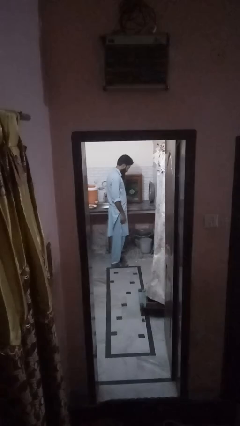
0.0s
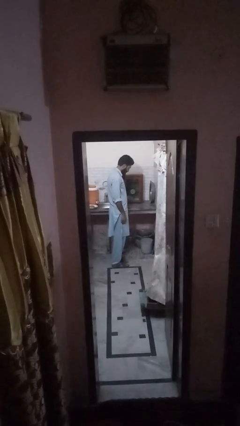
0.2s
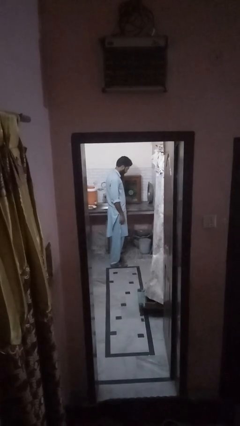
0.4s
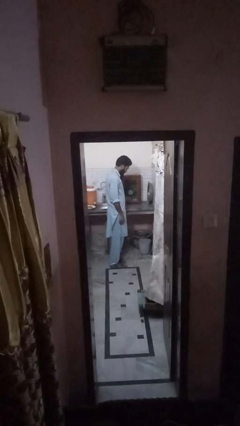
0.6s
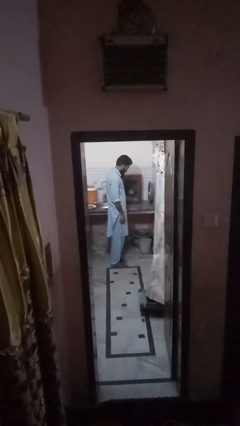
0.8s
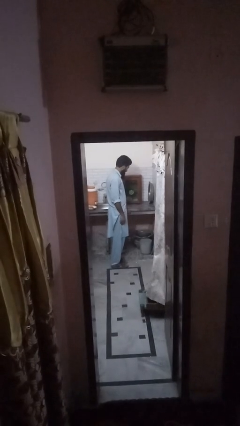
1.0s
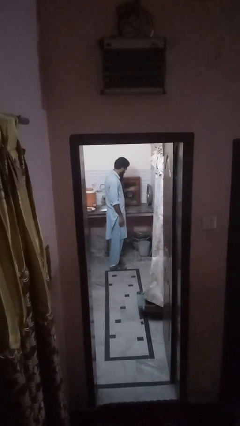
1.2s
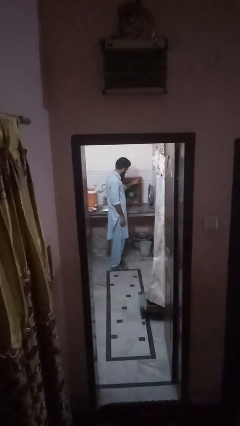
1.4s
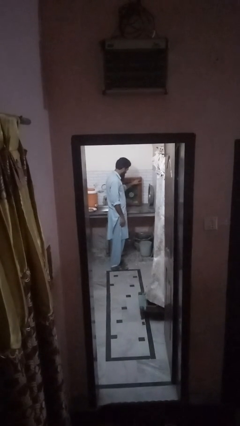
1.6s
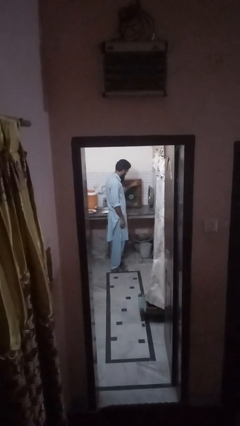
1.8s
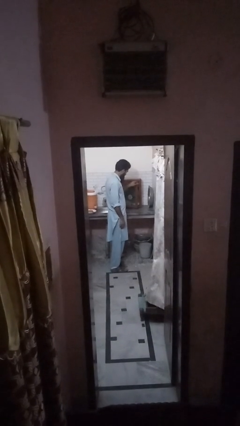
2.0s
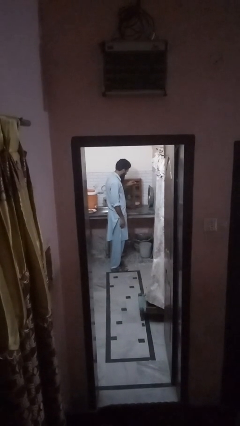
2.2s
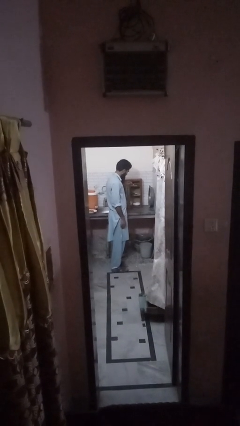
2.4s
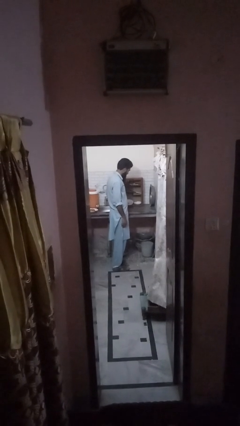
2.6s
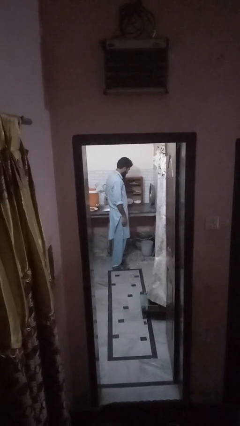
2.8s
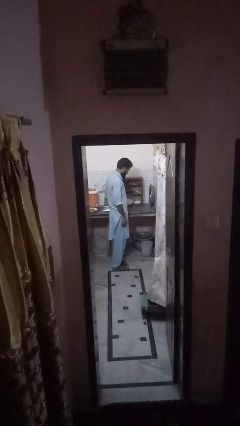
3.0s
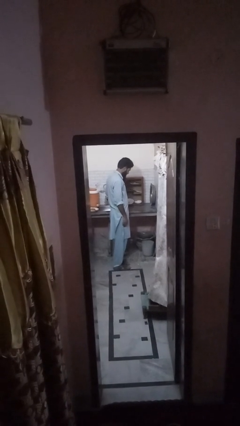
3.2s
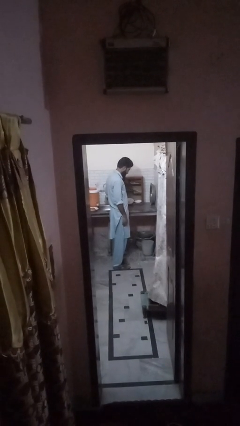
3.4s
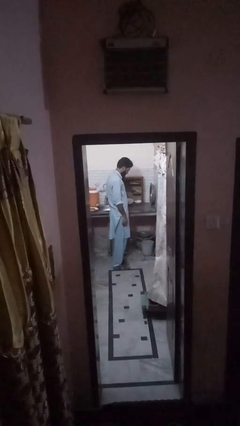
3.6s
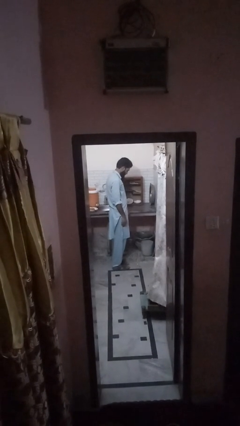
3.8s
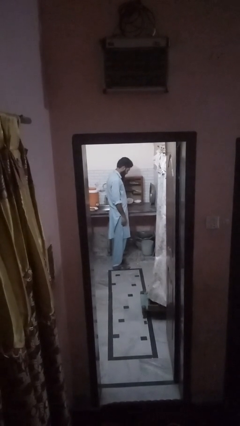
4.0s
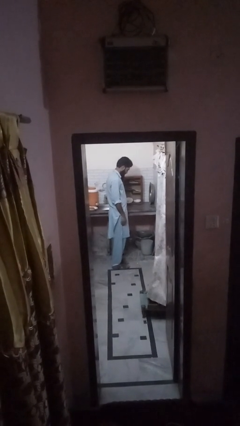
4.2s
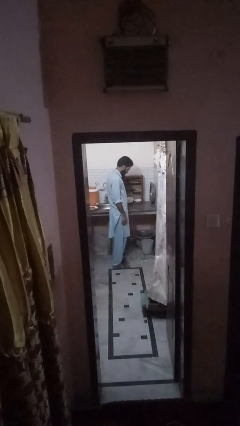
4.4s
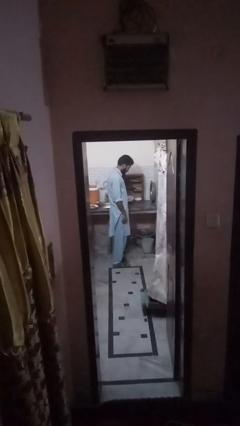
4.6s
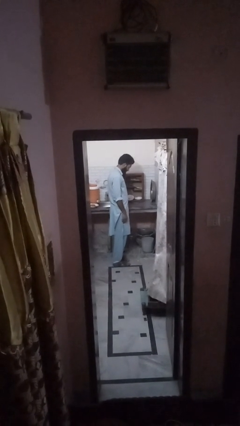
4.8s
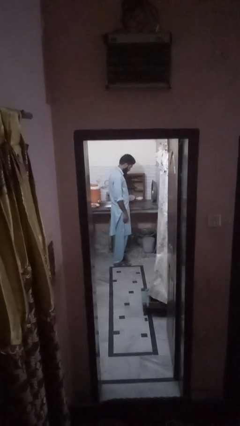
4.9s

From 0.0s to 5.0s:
person opens cabinet

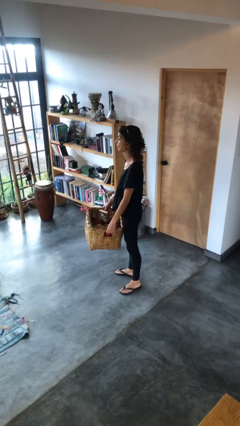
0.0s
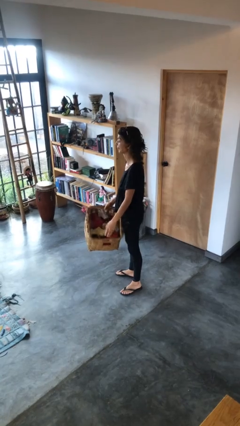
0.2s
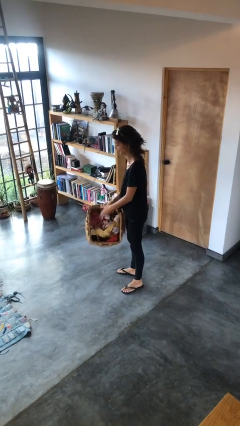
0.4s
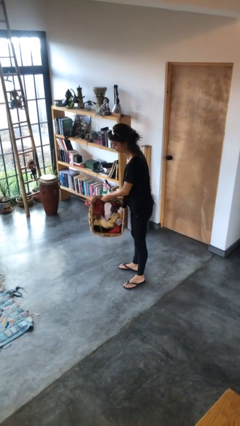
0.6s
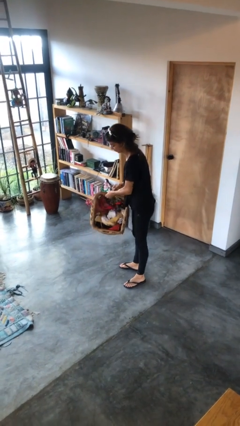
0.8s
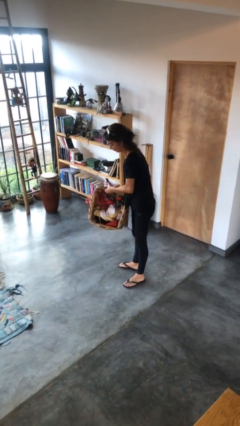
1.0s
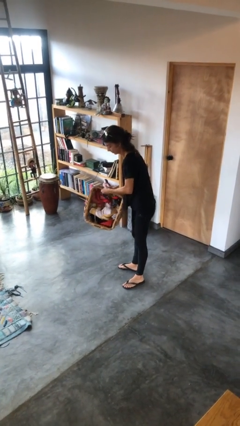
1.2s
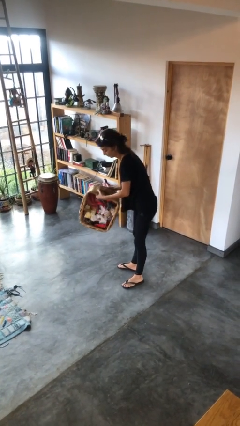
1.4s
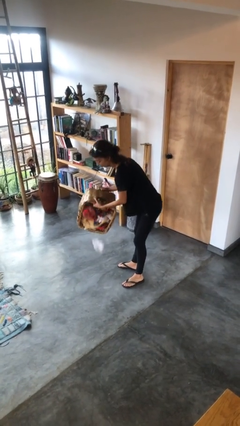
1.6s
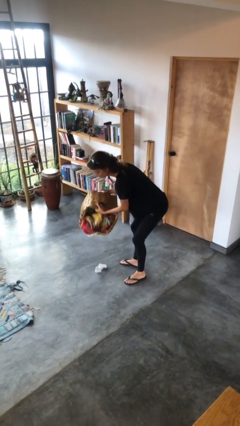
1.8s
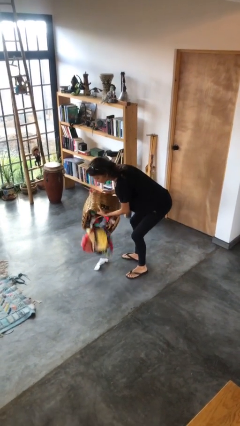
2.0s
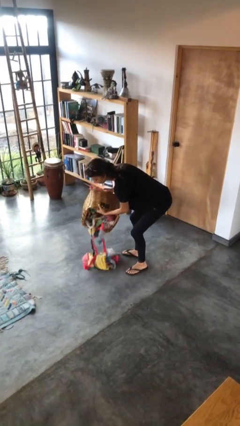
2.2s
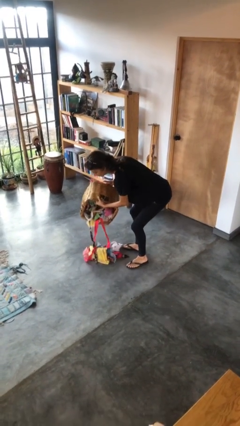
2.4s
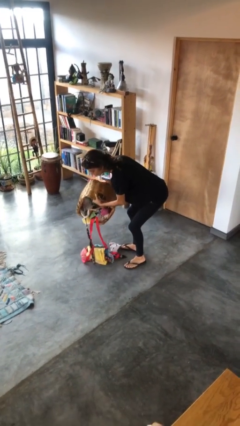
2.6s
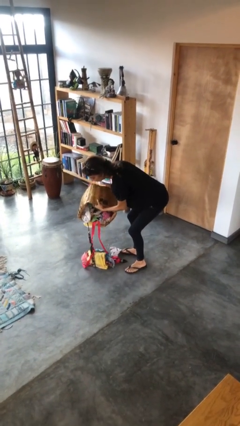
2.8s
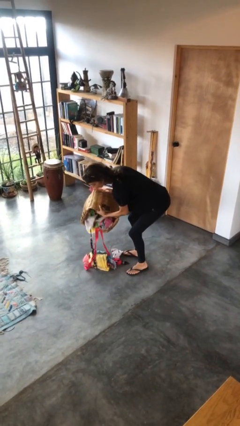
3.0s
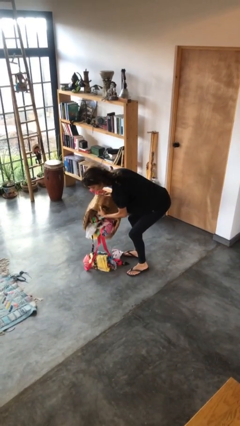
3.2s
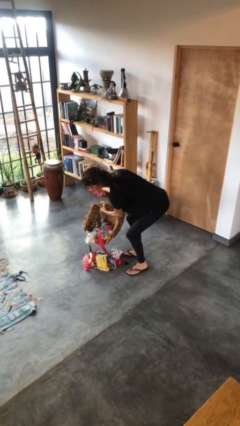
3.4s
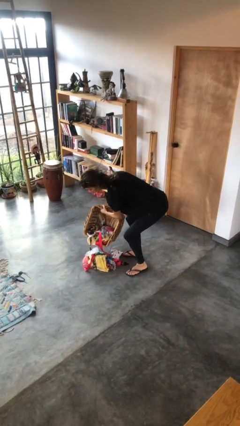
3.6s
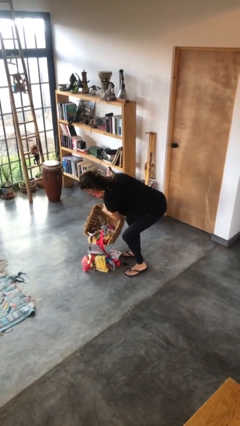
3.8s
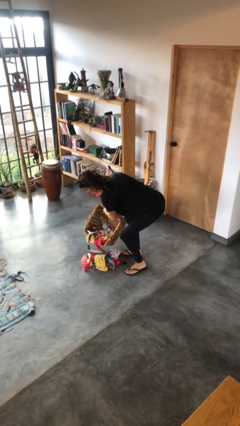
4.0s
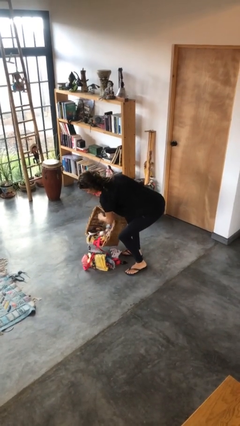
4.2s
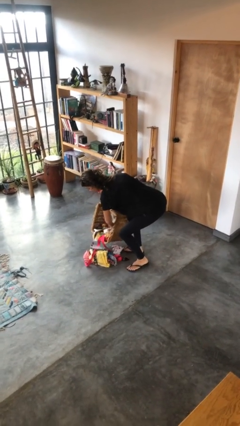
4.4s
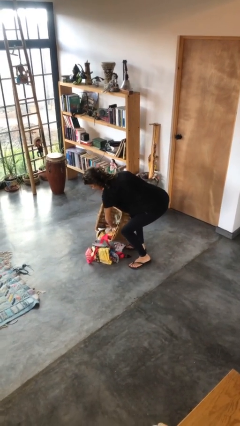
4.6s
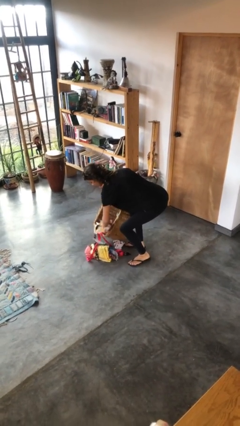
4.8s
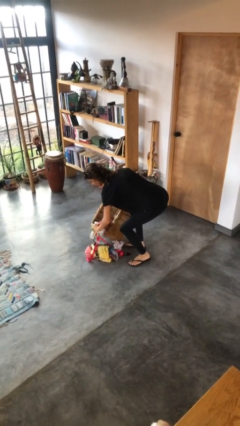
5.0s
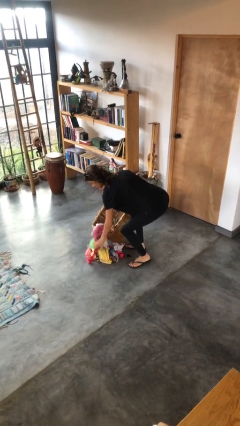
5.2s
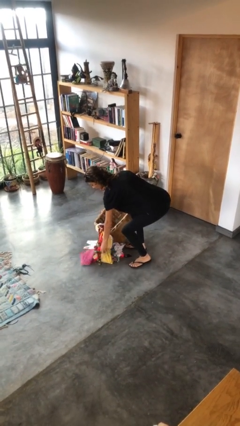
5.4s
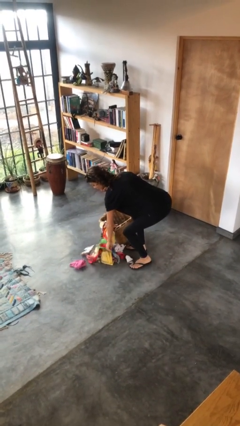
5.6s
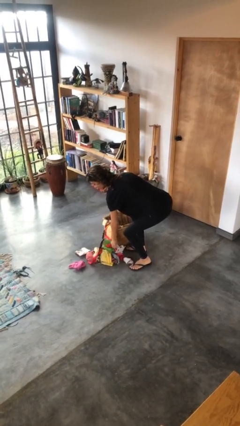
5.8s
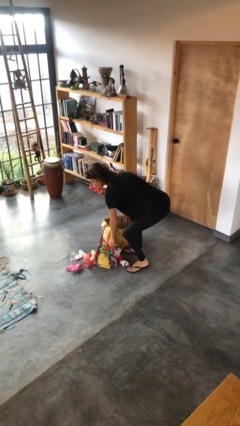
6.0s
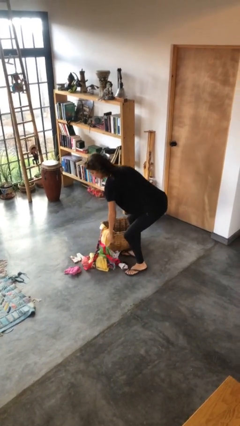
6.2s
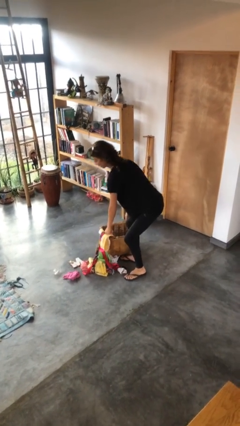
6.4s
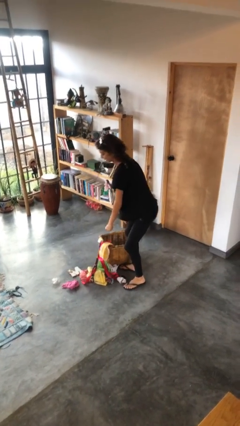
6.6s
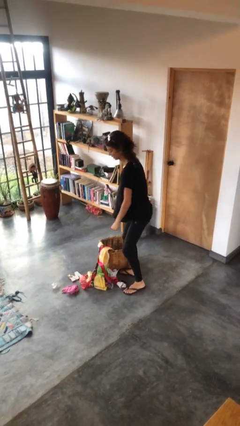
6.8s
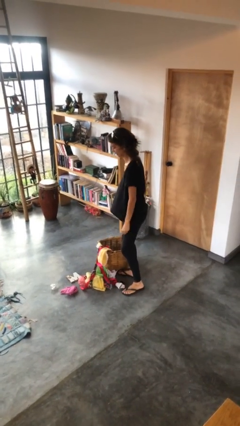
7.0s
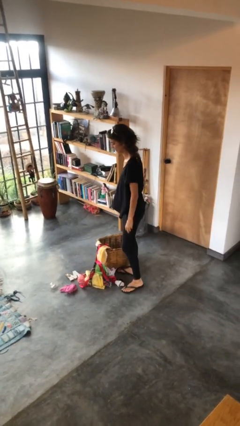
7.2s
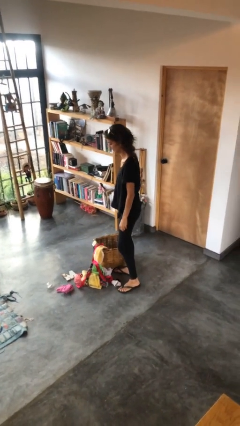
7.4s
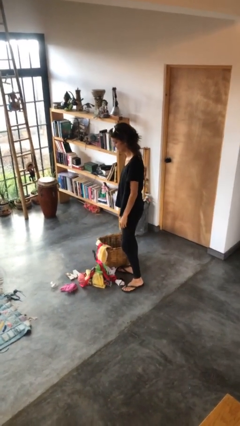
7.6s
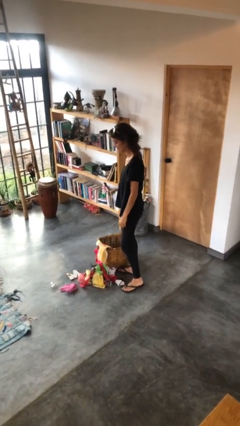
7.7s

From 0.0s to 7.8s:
person unloads box onto floor

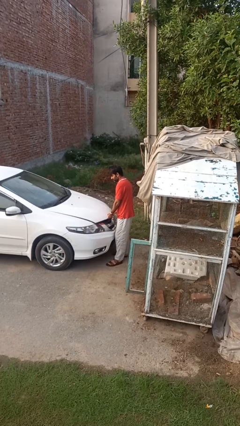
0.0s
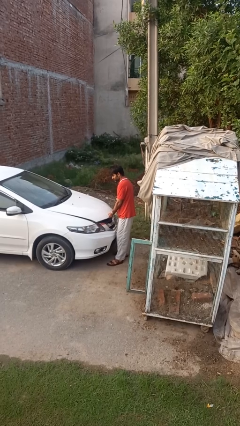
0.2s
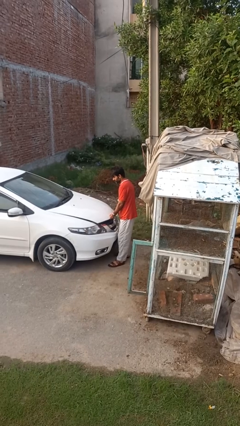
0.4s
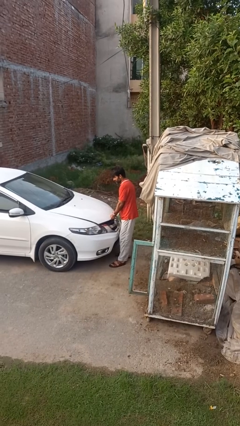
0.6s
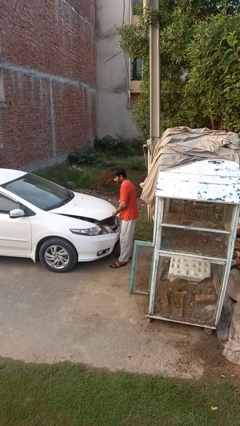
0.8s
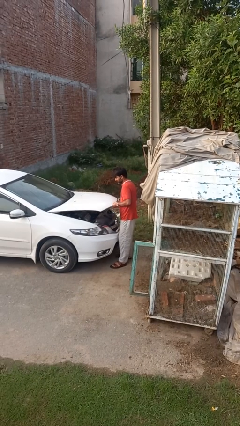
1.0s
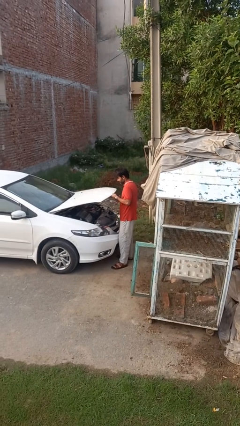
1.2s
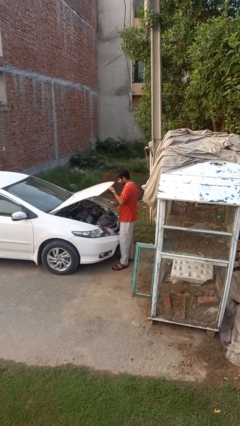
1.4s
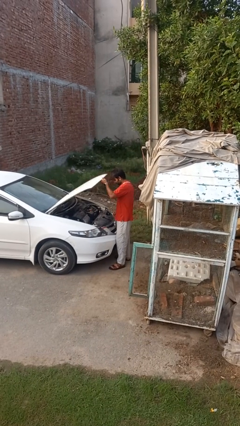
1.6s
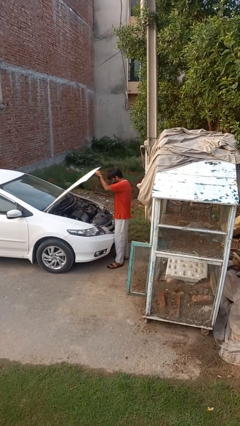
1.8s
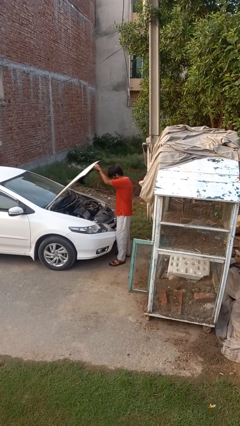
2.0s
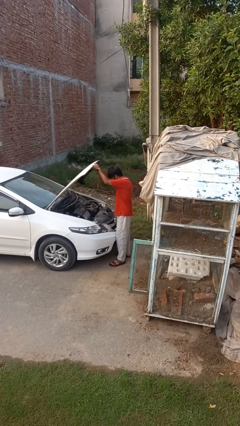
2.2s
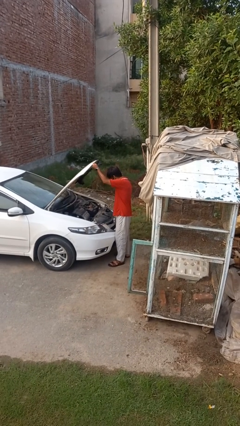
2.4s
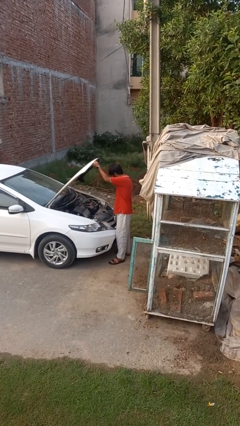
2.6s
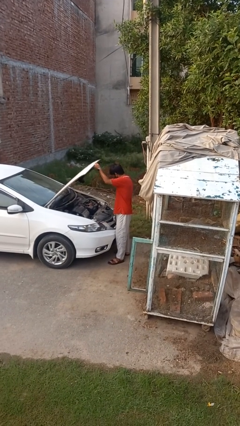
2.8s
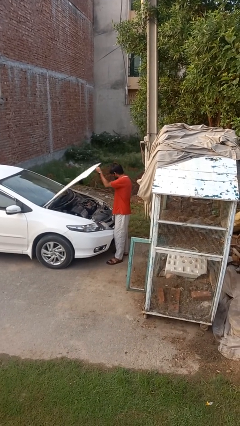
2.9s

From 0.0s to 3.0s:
person opens car hood

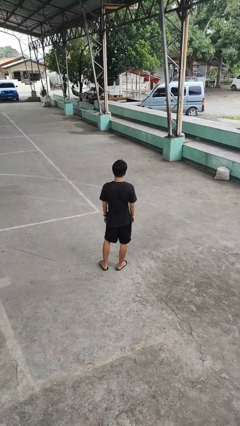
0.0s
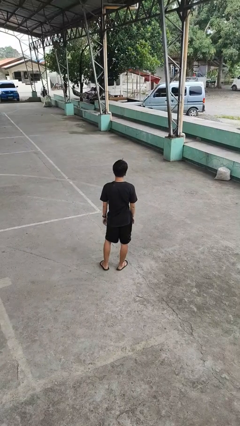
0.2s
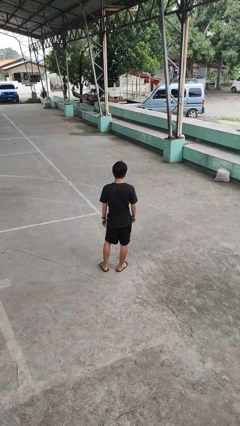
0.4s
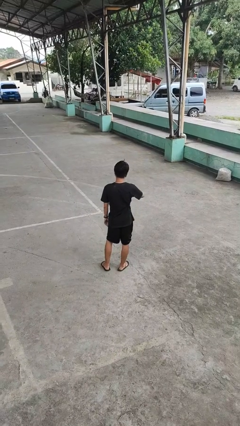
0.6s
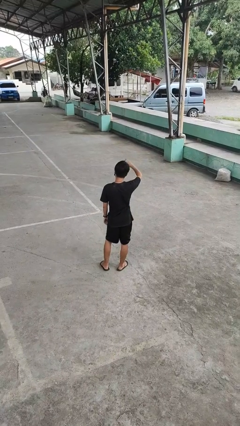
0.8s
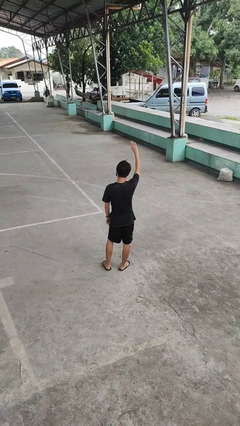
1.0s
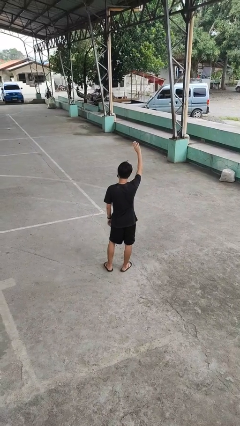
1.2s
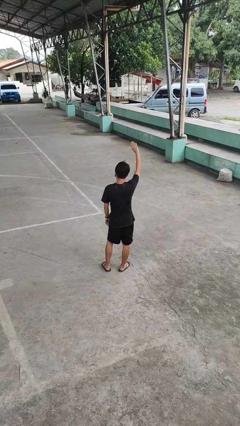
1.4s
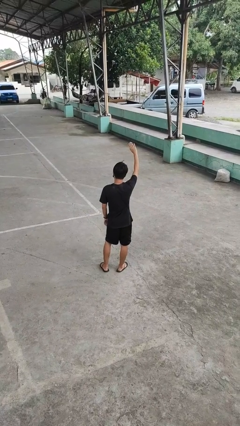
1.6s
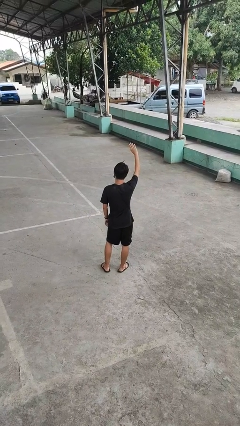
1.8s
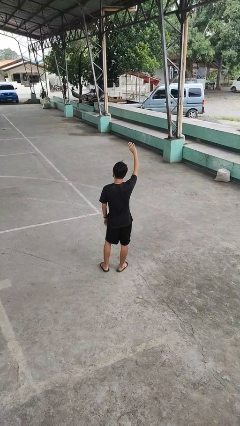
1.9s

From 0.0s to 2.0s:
person gestures swipe up

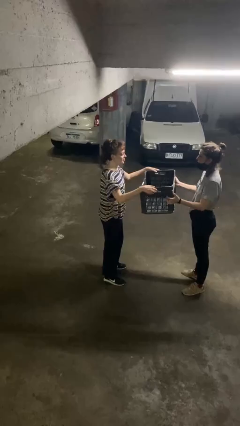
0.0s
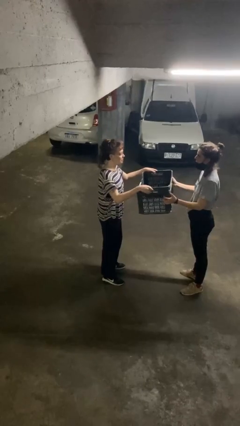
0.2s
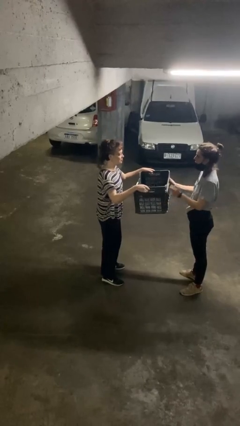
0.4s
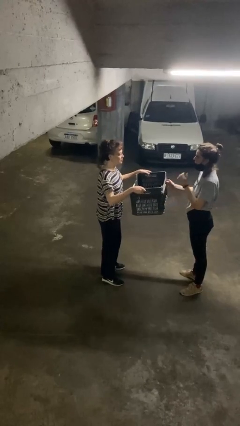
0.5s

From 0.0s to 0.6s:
person transfers object to person
